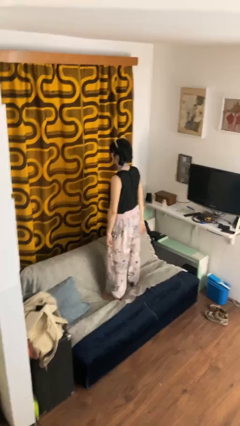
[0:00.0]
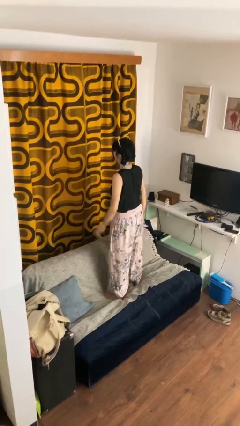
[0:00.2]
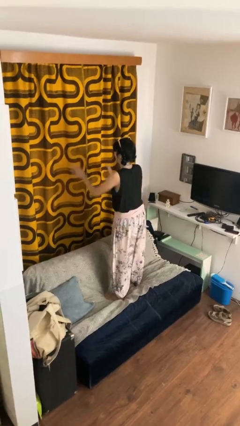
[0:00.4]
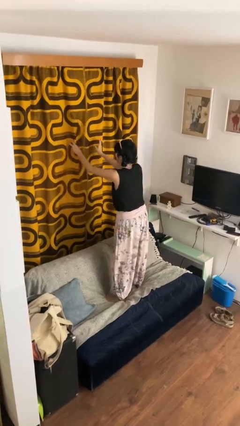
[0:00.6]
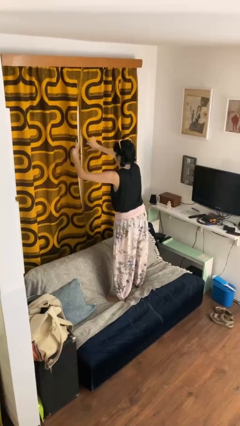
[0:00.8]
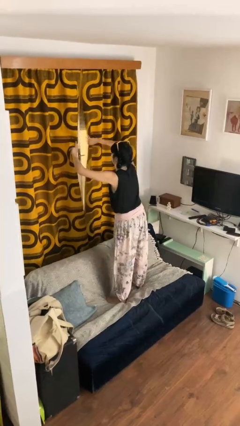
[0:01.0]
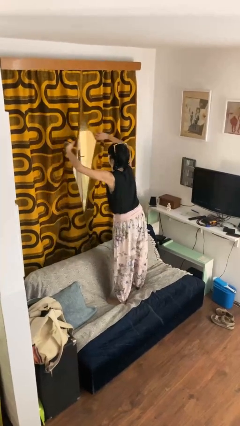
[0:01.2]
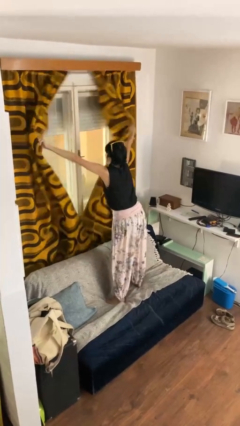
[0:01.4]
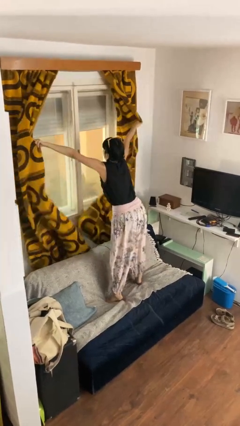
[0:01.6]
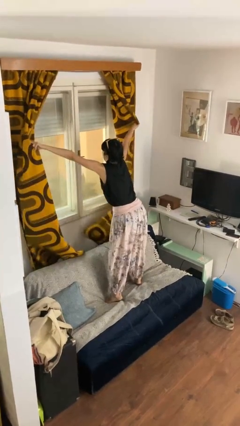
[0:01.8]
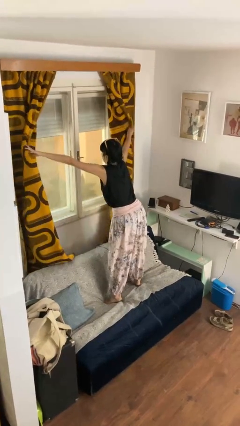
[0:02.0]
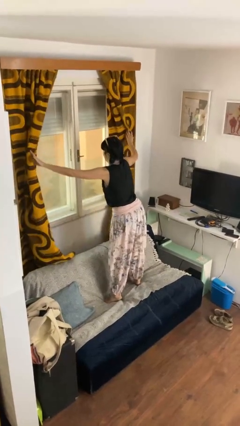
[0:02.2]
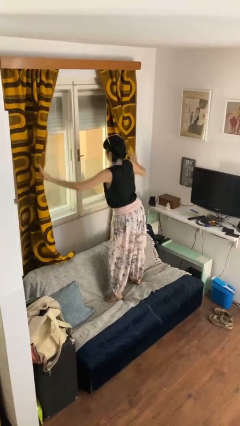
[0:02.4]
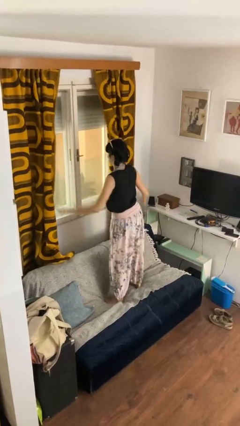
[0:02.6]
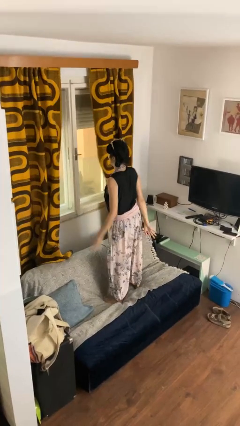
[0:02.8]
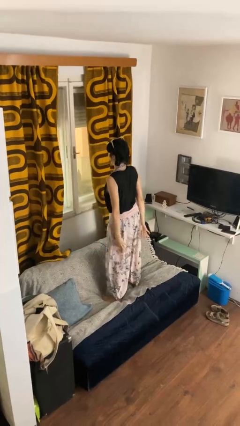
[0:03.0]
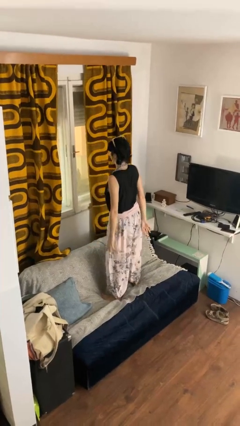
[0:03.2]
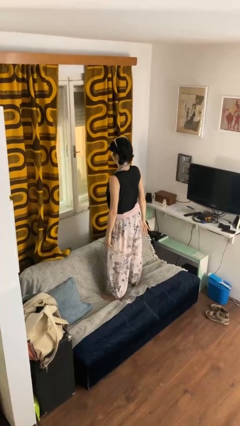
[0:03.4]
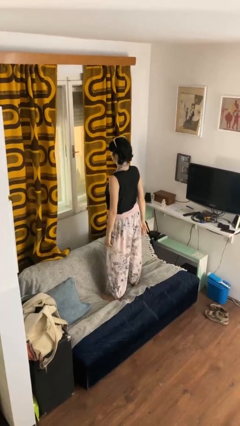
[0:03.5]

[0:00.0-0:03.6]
person opens curtains

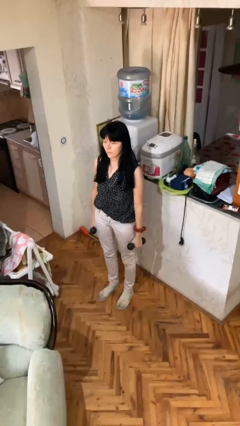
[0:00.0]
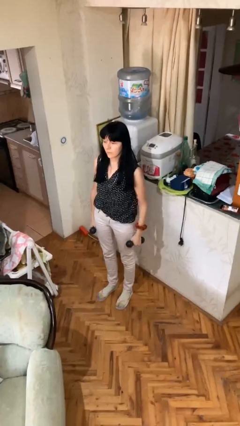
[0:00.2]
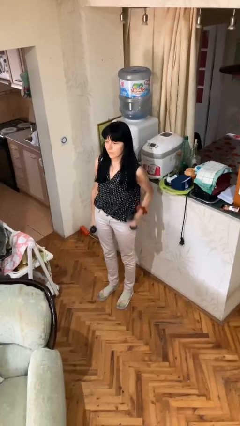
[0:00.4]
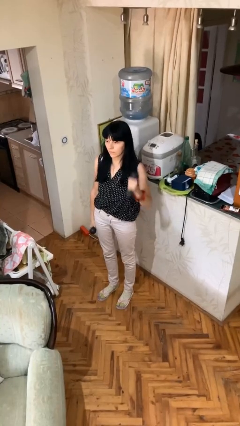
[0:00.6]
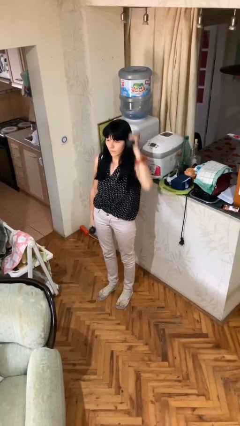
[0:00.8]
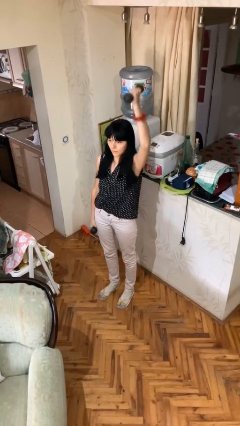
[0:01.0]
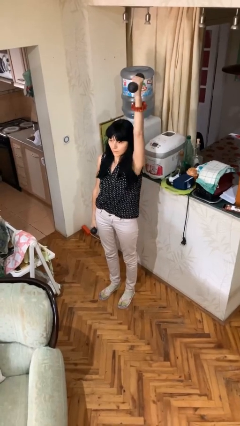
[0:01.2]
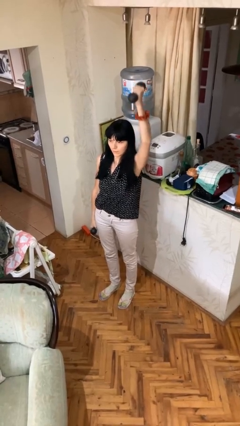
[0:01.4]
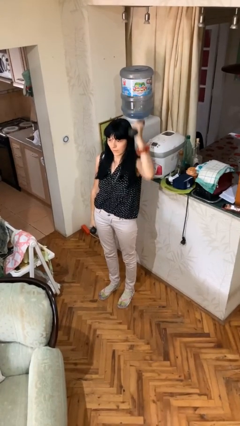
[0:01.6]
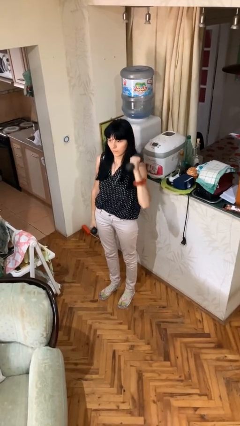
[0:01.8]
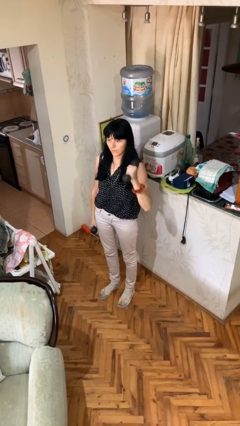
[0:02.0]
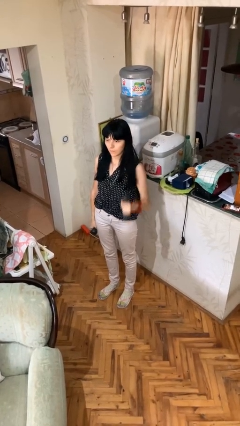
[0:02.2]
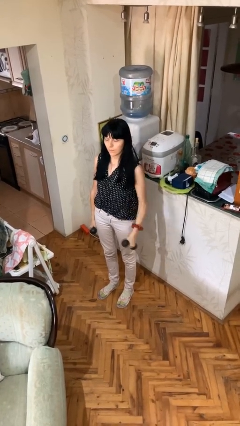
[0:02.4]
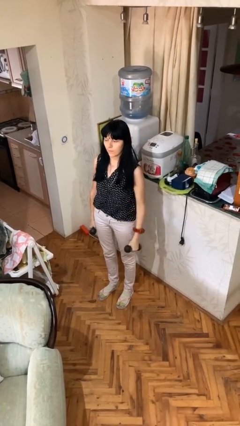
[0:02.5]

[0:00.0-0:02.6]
person lifts dumbbells

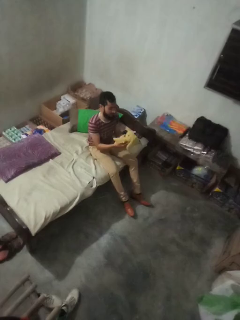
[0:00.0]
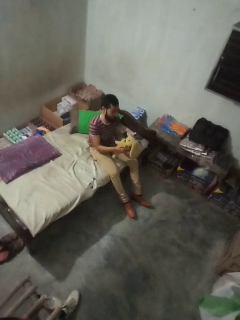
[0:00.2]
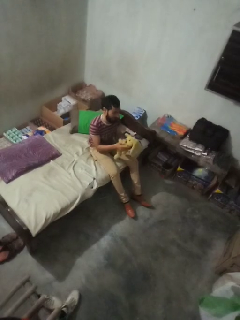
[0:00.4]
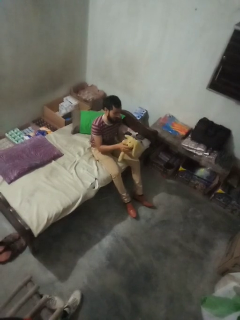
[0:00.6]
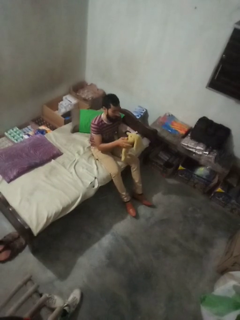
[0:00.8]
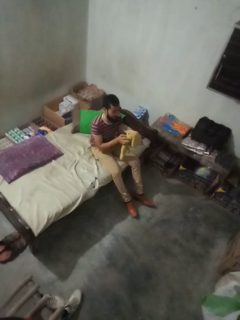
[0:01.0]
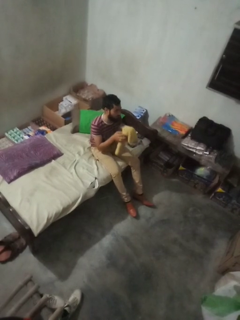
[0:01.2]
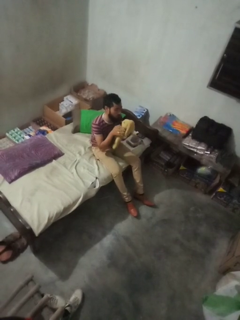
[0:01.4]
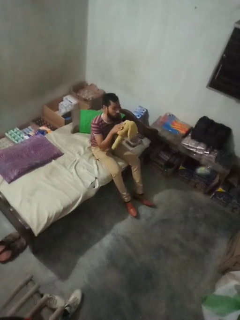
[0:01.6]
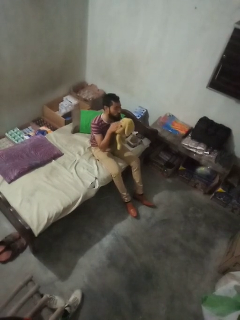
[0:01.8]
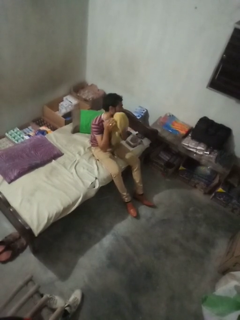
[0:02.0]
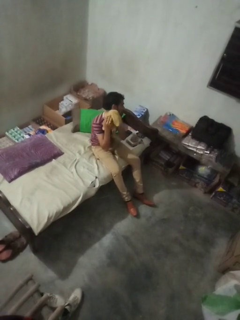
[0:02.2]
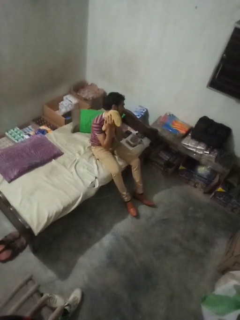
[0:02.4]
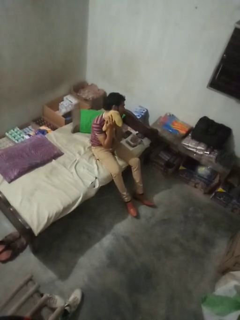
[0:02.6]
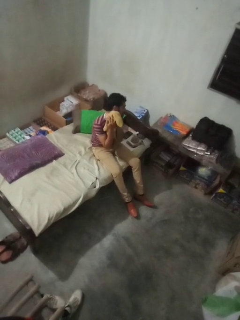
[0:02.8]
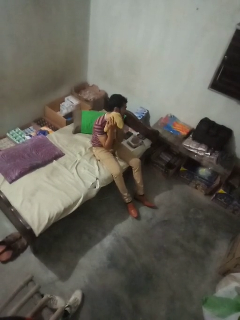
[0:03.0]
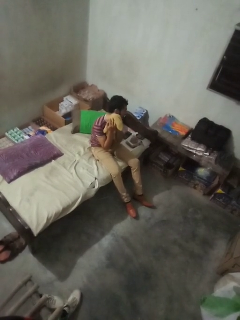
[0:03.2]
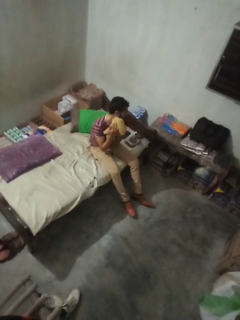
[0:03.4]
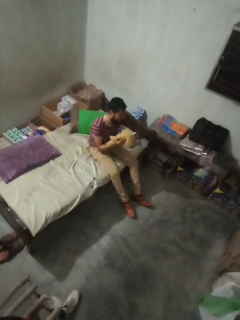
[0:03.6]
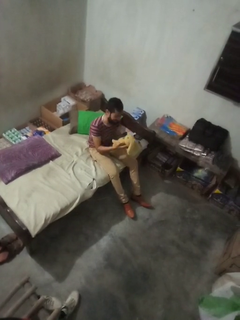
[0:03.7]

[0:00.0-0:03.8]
person hugs stuffed animal

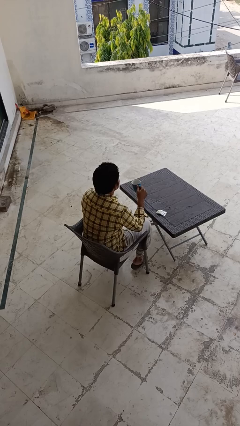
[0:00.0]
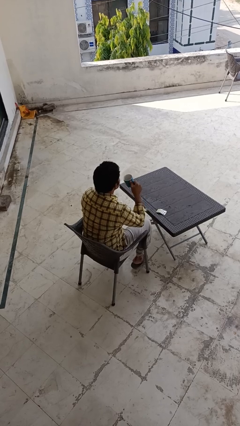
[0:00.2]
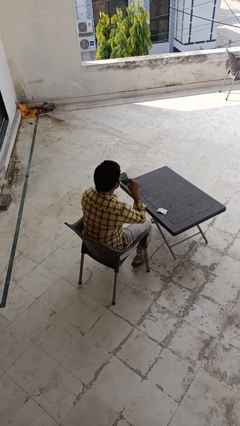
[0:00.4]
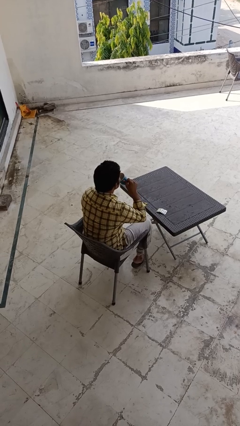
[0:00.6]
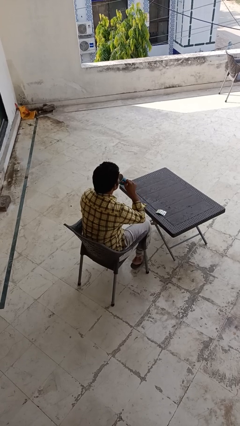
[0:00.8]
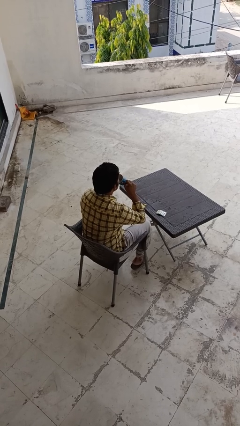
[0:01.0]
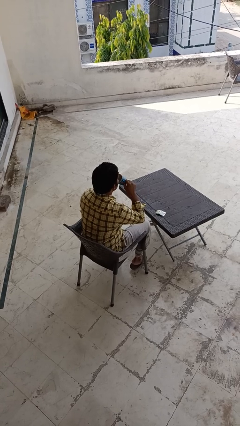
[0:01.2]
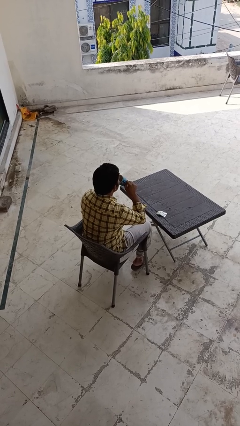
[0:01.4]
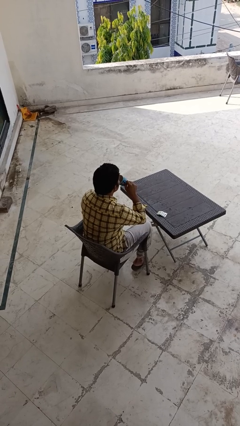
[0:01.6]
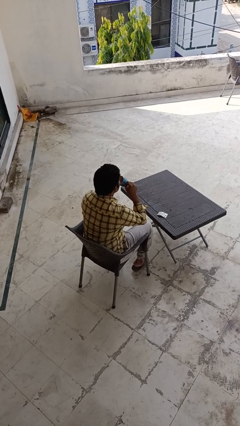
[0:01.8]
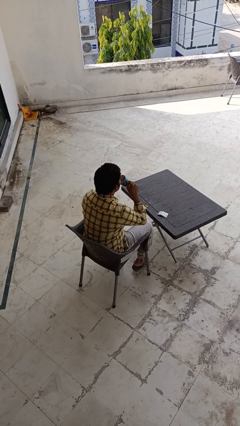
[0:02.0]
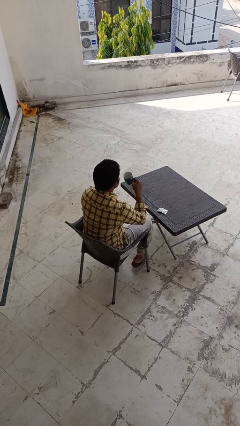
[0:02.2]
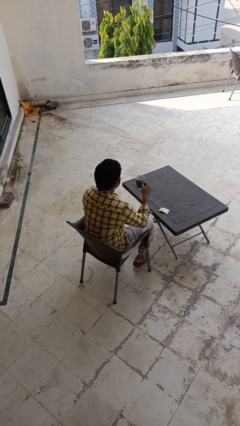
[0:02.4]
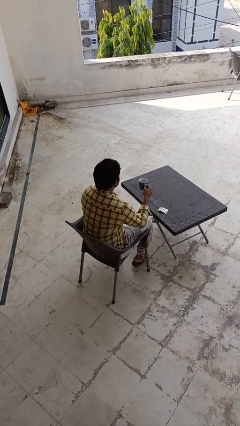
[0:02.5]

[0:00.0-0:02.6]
person drinks from cup

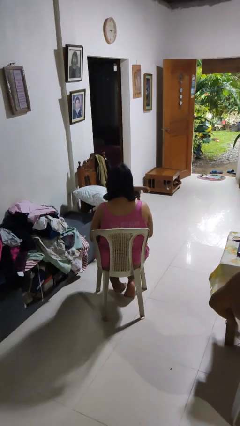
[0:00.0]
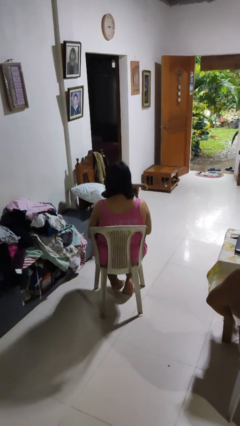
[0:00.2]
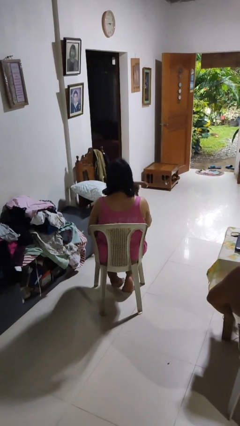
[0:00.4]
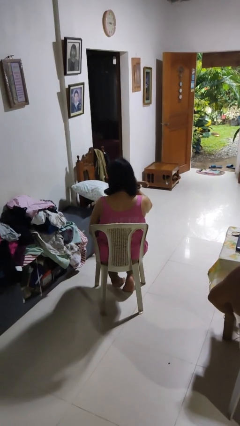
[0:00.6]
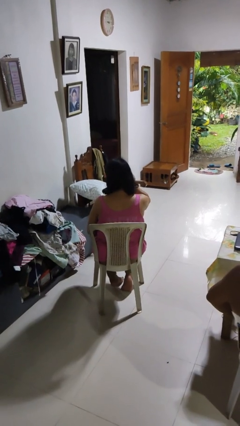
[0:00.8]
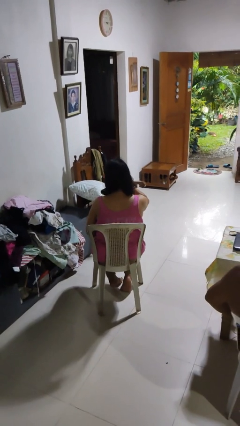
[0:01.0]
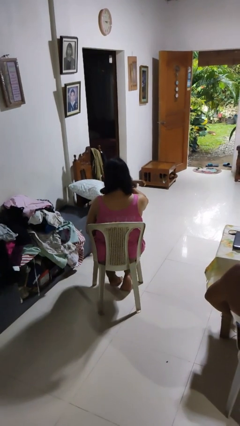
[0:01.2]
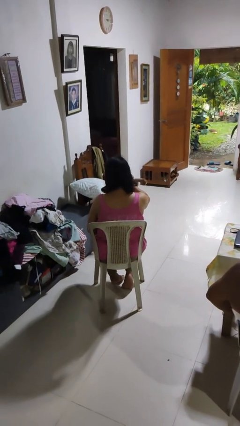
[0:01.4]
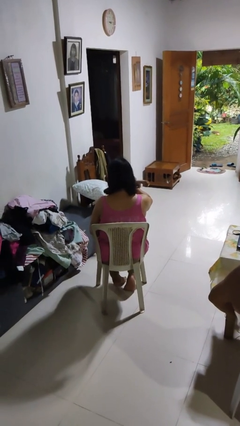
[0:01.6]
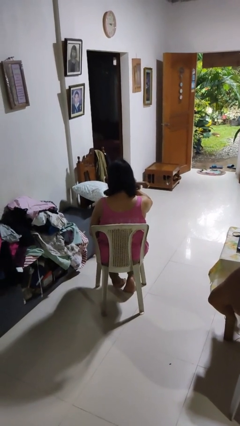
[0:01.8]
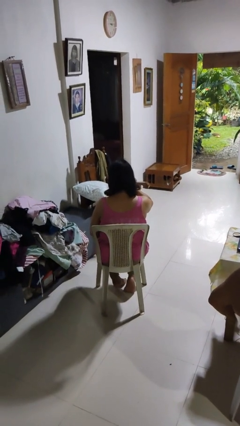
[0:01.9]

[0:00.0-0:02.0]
person touches earlobe

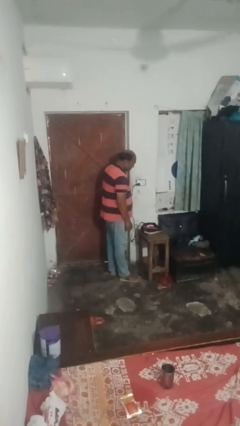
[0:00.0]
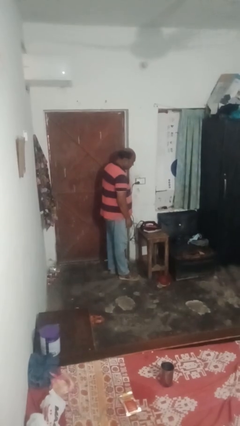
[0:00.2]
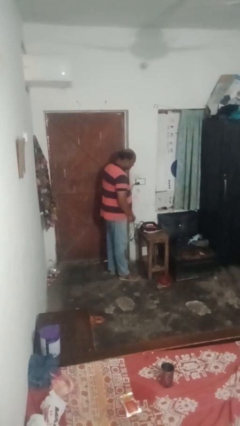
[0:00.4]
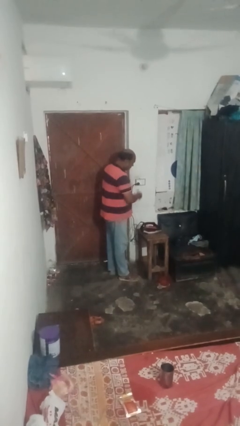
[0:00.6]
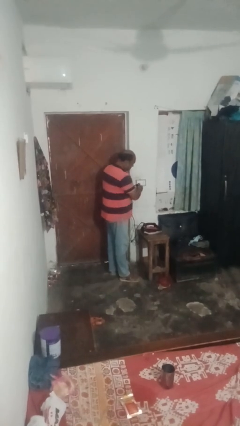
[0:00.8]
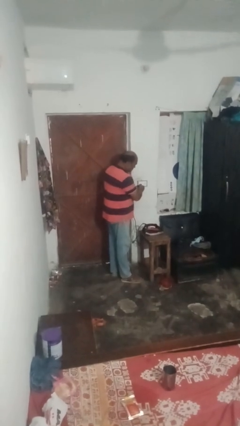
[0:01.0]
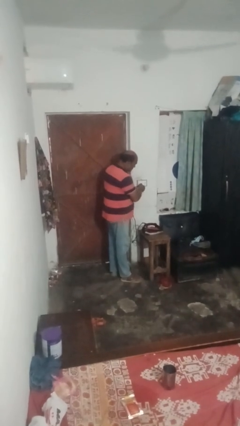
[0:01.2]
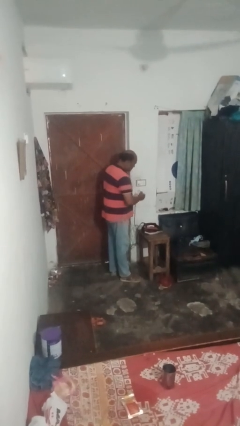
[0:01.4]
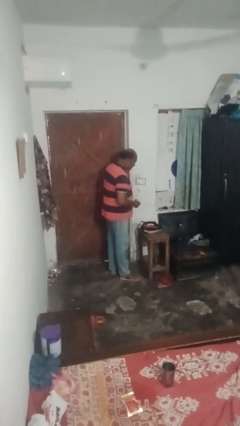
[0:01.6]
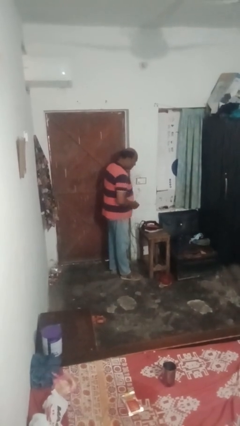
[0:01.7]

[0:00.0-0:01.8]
person unplugs from electrical socket

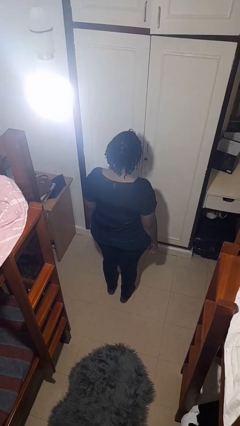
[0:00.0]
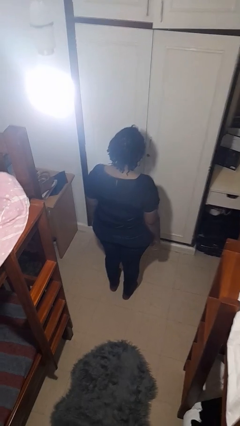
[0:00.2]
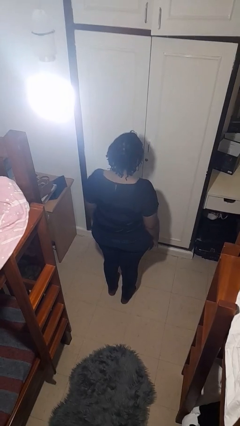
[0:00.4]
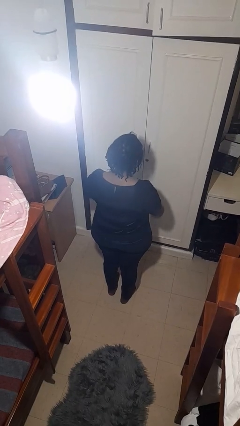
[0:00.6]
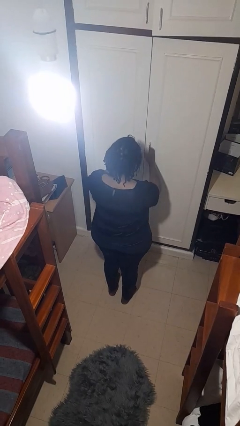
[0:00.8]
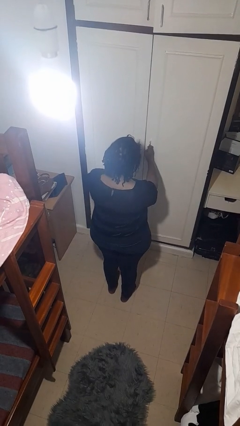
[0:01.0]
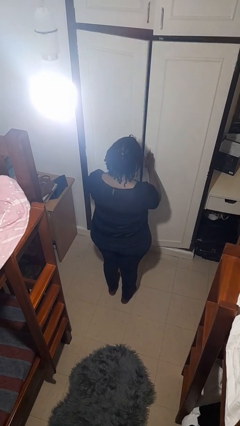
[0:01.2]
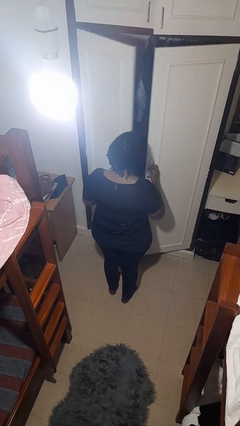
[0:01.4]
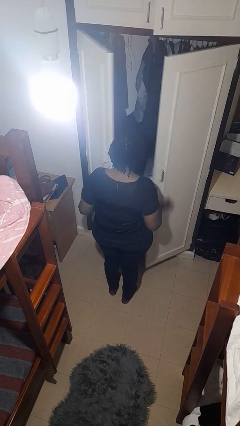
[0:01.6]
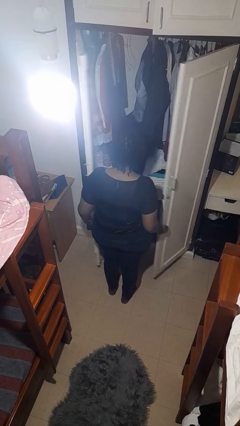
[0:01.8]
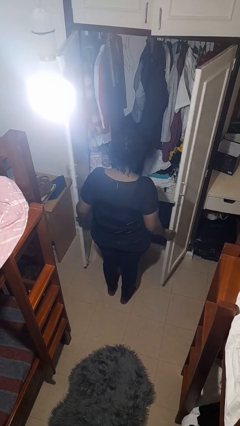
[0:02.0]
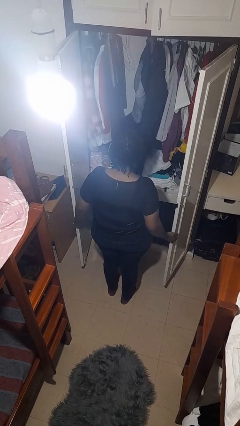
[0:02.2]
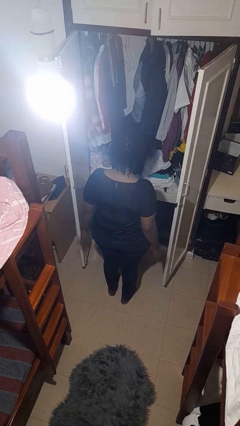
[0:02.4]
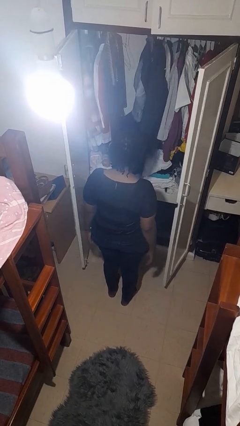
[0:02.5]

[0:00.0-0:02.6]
person opens closet door
